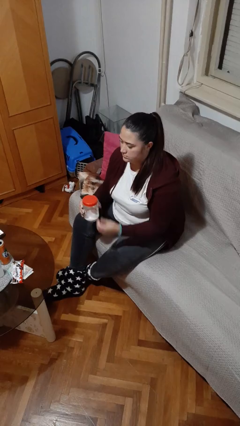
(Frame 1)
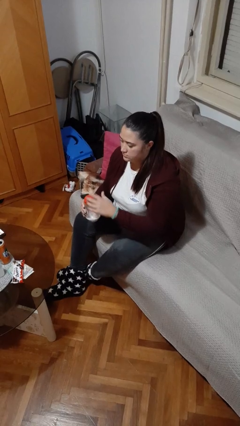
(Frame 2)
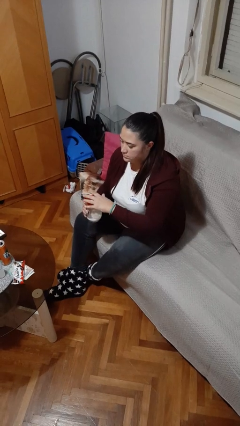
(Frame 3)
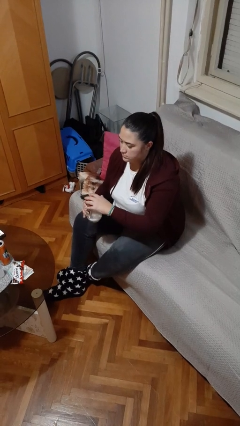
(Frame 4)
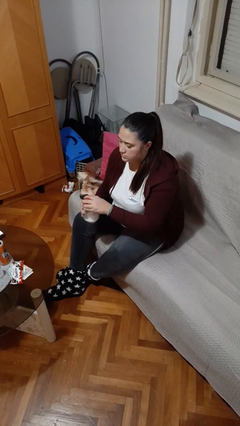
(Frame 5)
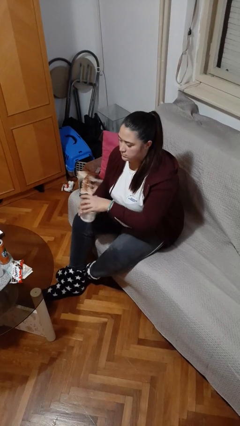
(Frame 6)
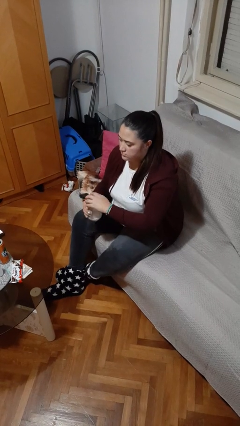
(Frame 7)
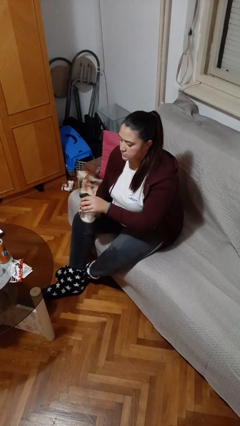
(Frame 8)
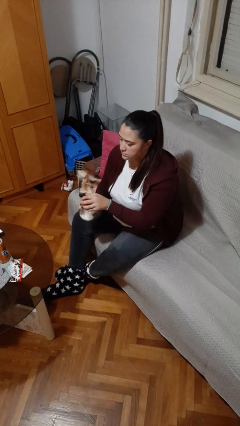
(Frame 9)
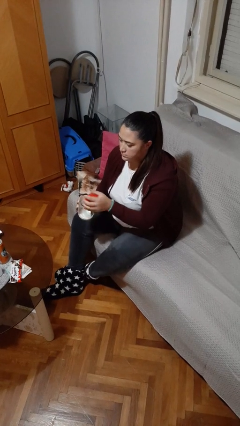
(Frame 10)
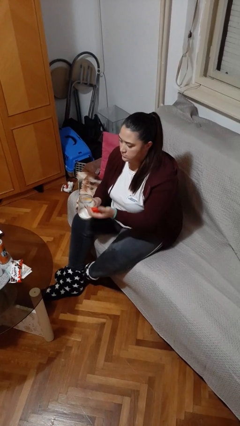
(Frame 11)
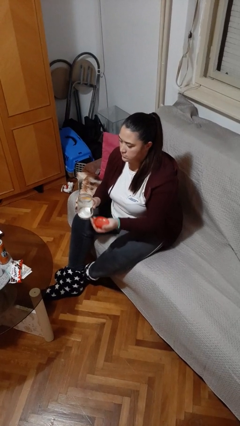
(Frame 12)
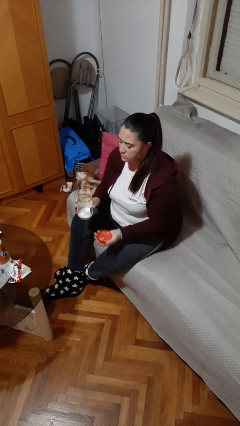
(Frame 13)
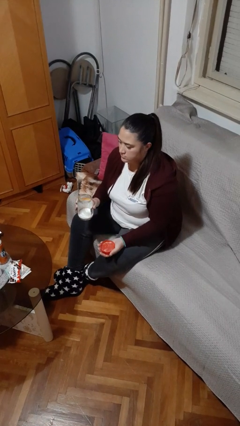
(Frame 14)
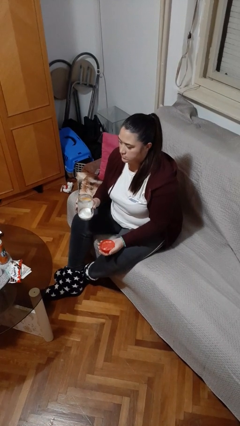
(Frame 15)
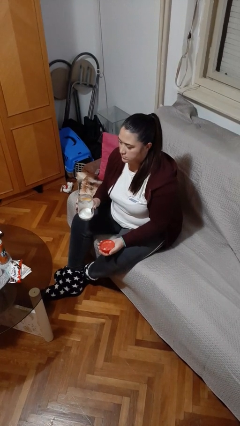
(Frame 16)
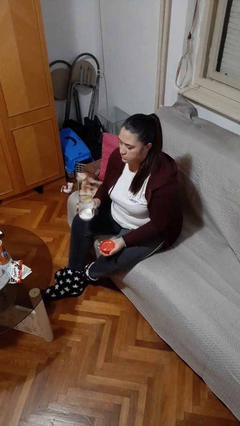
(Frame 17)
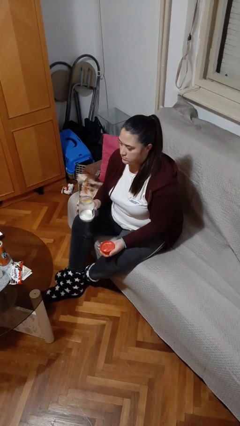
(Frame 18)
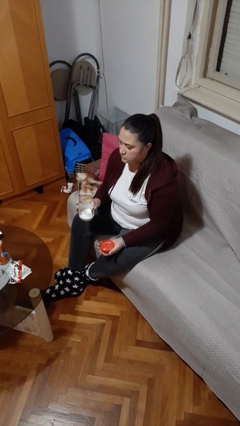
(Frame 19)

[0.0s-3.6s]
person opens jar

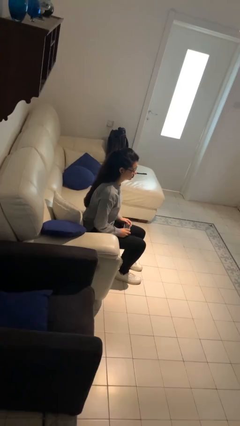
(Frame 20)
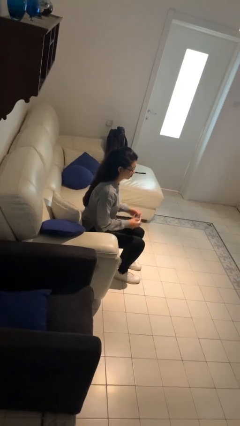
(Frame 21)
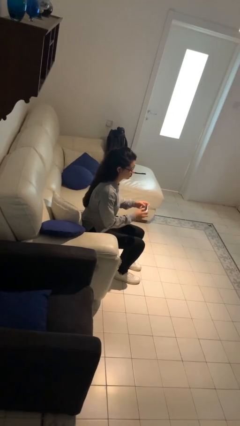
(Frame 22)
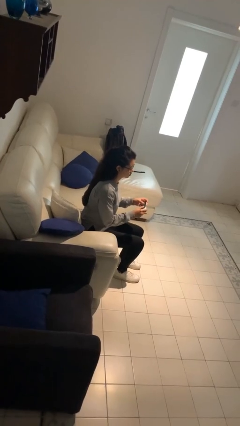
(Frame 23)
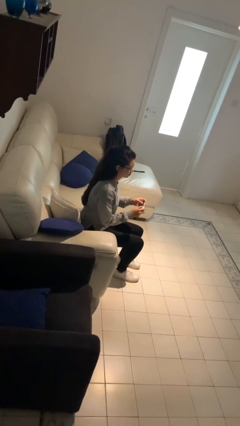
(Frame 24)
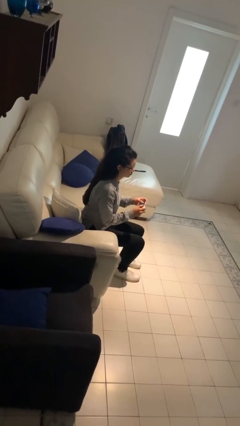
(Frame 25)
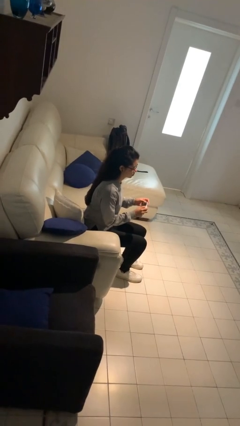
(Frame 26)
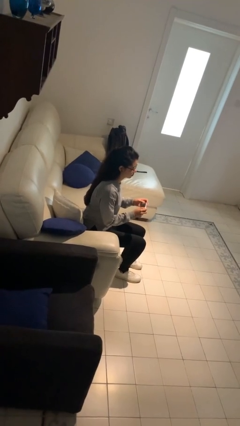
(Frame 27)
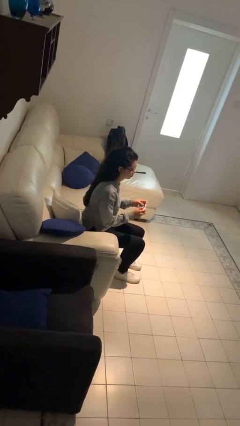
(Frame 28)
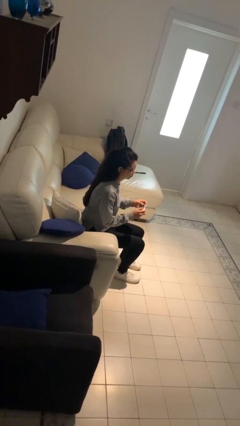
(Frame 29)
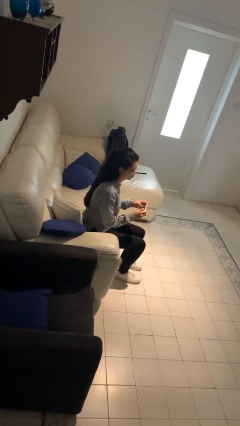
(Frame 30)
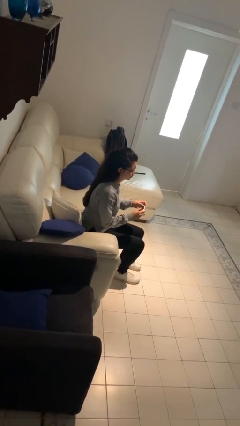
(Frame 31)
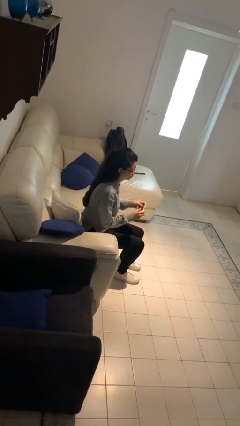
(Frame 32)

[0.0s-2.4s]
person interacts with handheld game

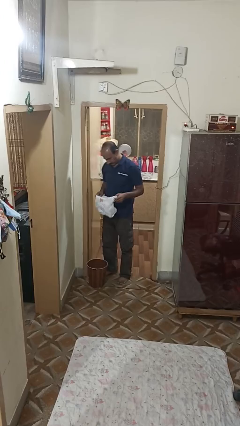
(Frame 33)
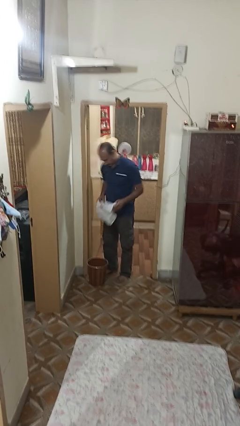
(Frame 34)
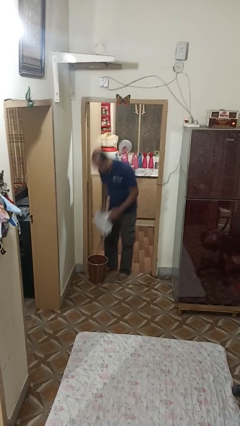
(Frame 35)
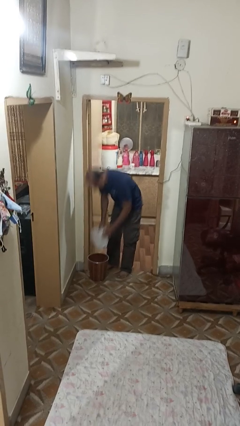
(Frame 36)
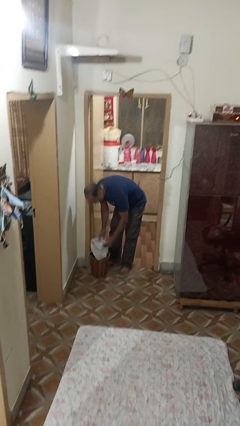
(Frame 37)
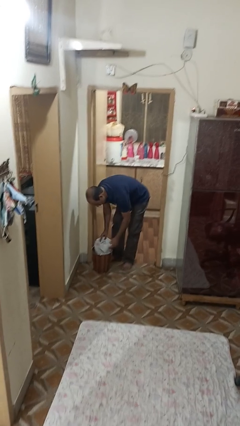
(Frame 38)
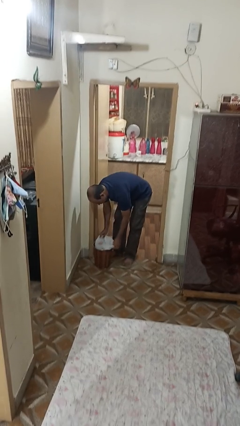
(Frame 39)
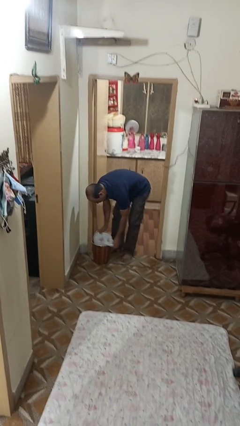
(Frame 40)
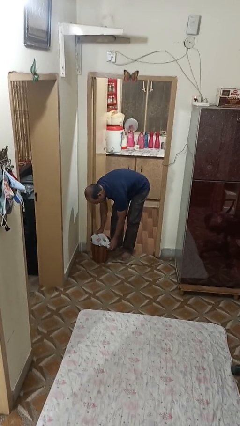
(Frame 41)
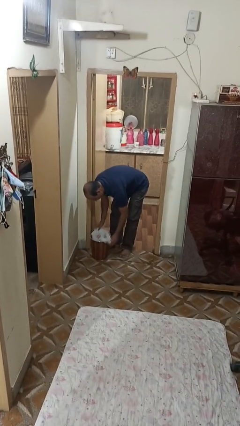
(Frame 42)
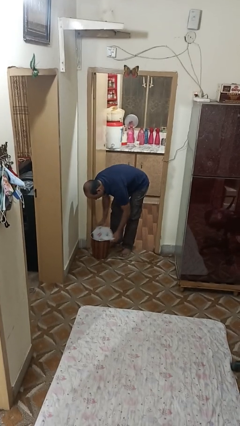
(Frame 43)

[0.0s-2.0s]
person inserts trashbag into trashcan

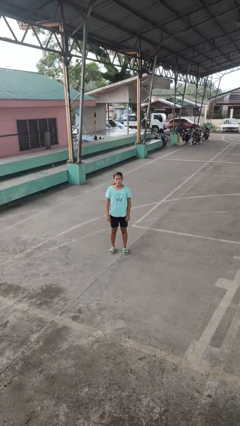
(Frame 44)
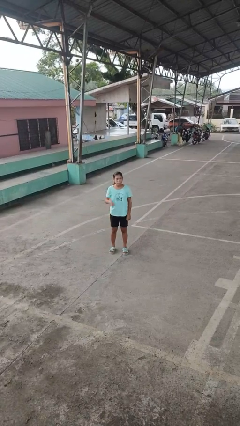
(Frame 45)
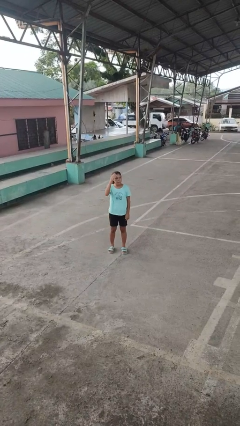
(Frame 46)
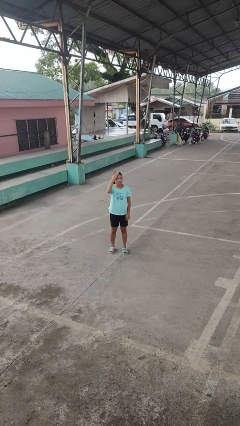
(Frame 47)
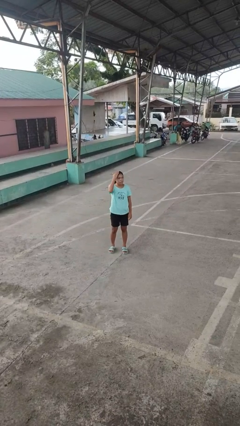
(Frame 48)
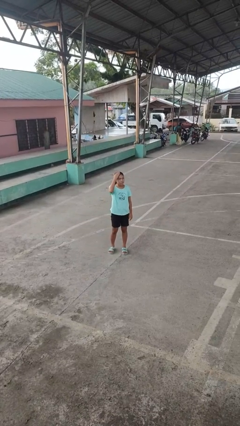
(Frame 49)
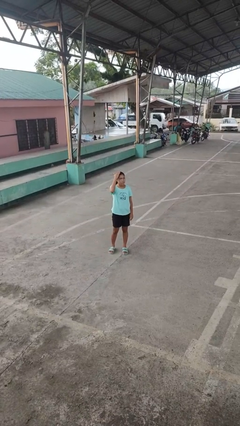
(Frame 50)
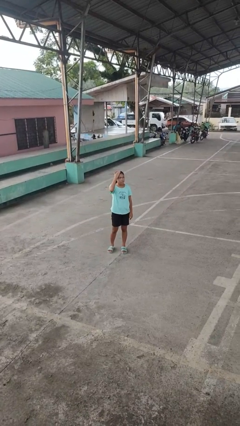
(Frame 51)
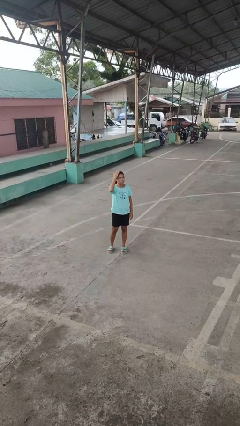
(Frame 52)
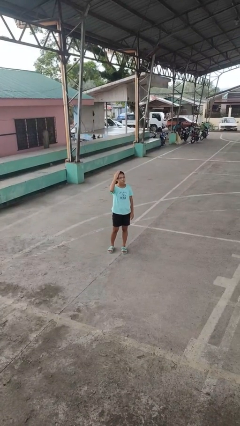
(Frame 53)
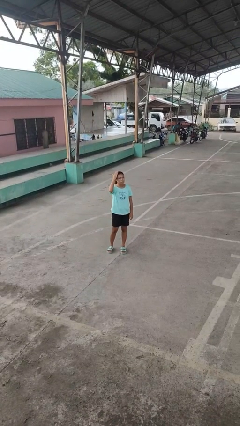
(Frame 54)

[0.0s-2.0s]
person pats head

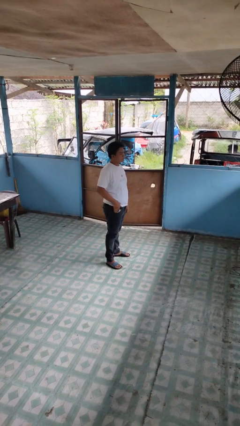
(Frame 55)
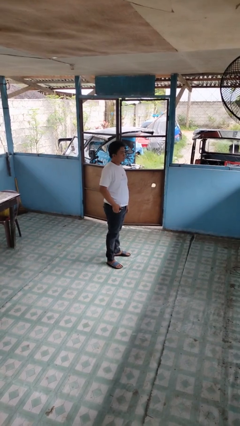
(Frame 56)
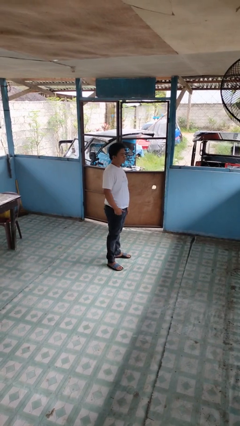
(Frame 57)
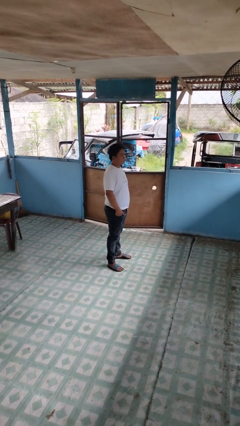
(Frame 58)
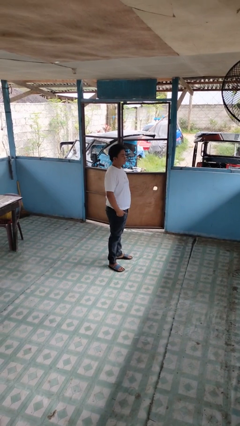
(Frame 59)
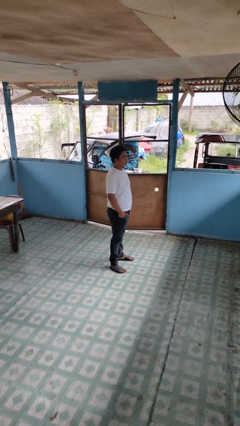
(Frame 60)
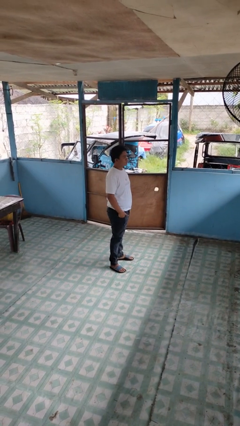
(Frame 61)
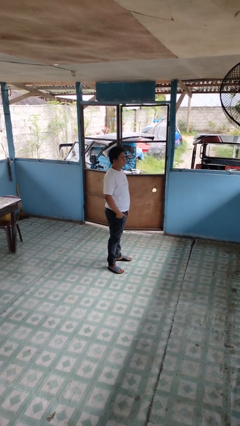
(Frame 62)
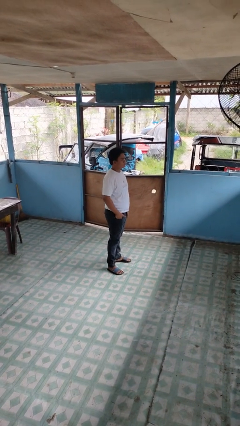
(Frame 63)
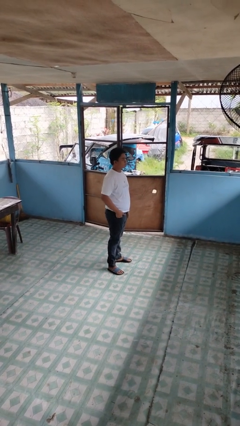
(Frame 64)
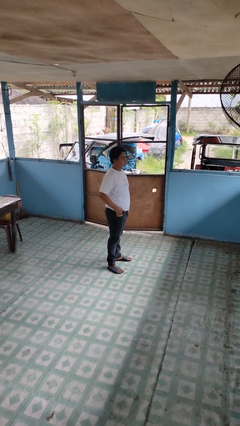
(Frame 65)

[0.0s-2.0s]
person puts hands in back pockets

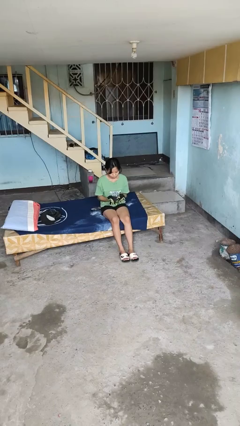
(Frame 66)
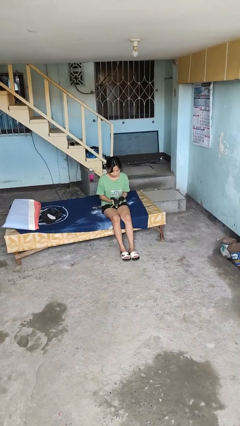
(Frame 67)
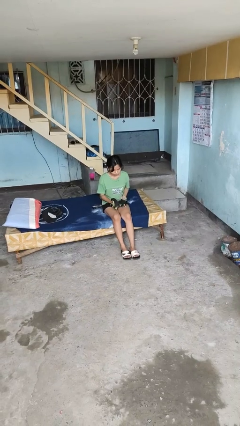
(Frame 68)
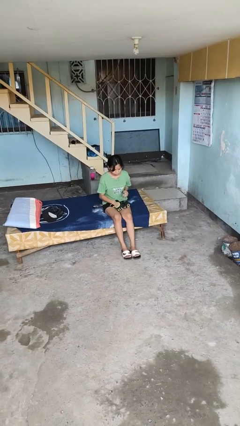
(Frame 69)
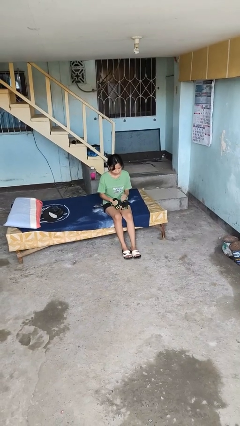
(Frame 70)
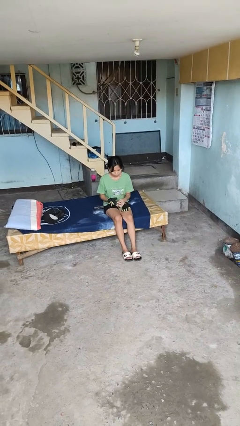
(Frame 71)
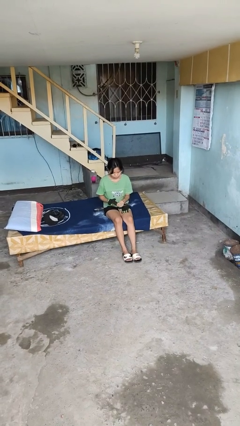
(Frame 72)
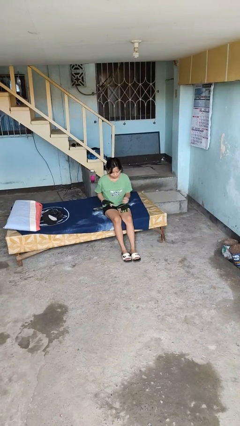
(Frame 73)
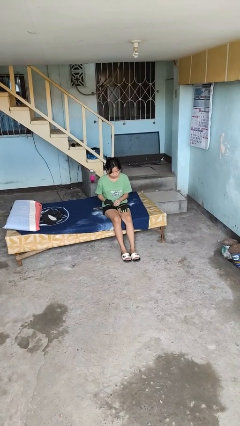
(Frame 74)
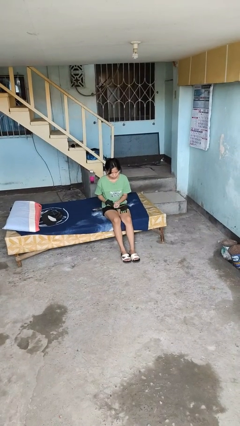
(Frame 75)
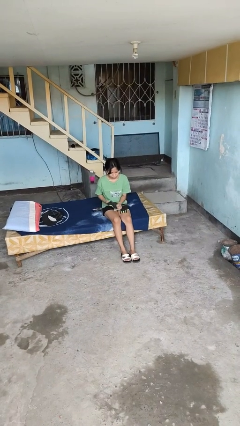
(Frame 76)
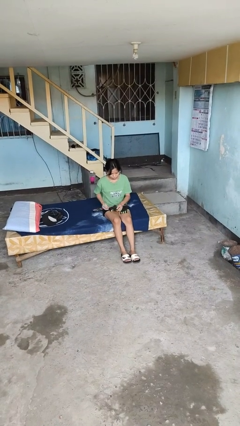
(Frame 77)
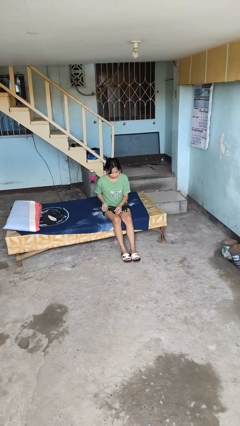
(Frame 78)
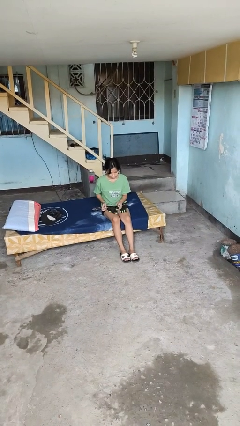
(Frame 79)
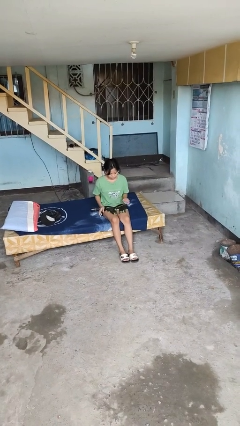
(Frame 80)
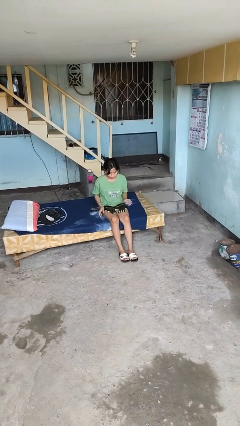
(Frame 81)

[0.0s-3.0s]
person takes off gloves

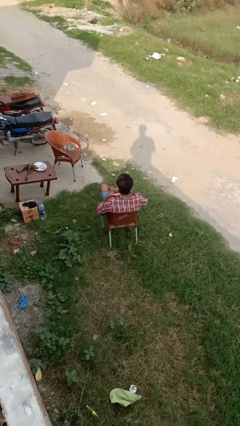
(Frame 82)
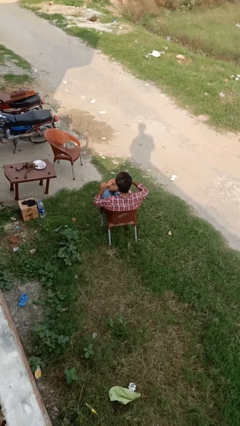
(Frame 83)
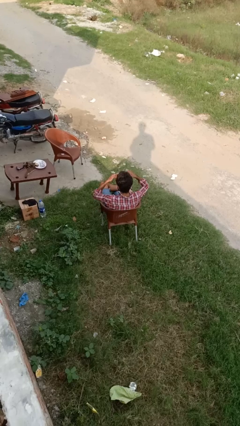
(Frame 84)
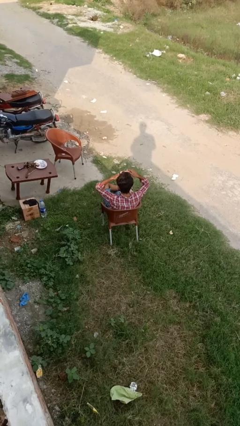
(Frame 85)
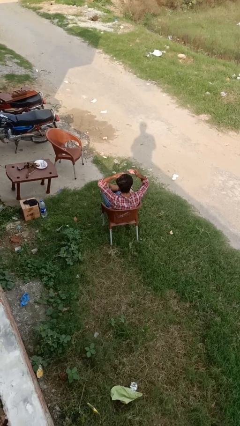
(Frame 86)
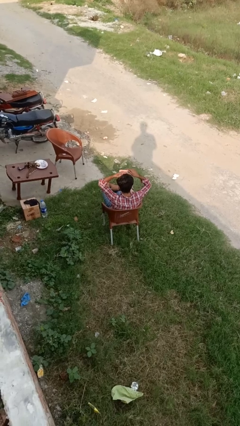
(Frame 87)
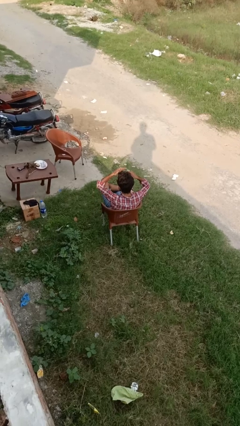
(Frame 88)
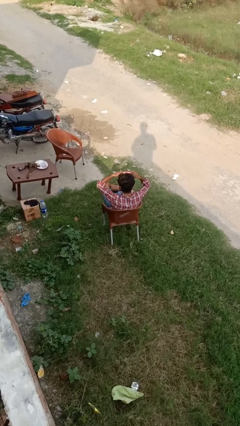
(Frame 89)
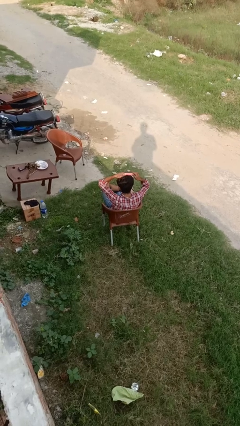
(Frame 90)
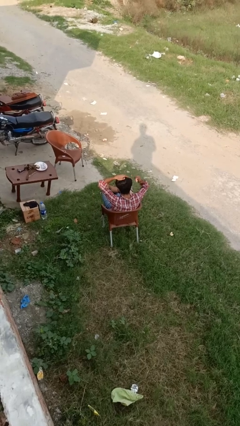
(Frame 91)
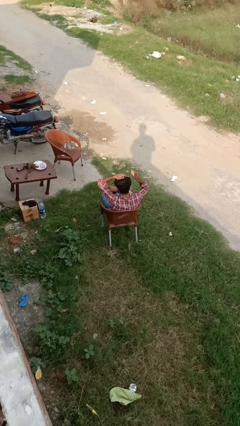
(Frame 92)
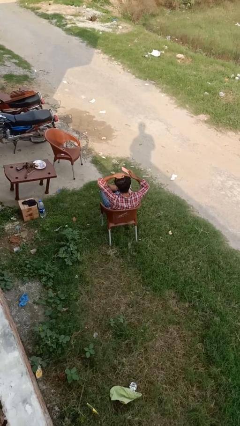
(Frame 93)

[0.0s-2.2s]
person brushes hair
